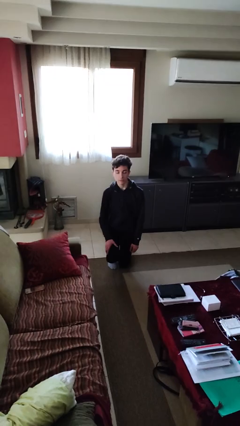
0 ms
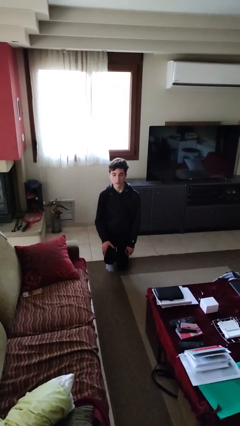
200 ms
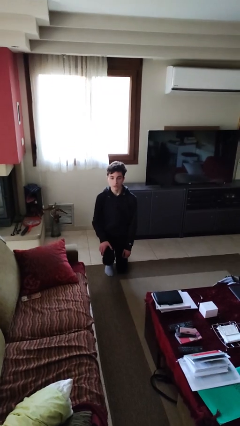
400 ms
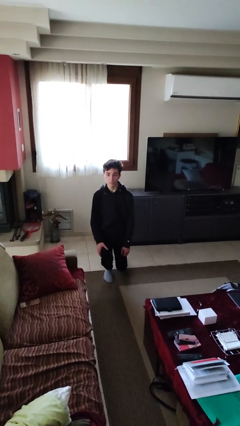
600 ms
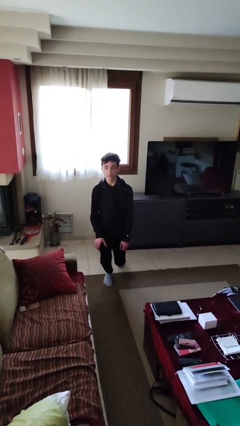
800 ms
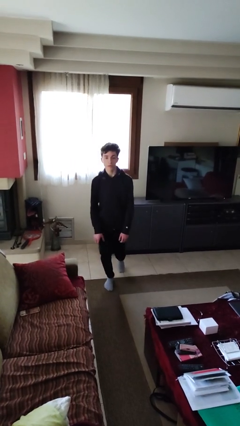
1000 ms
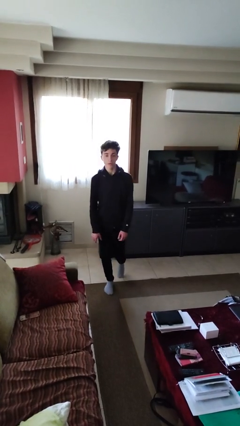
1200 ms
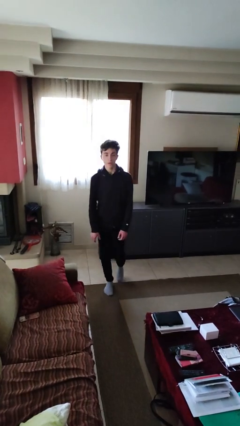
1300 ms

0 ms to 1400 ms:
person stands up from floor

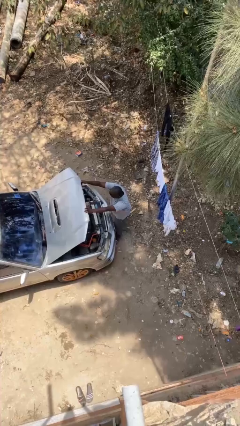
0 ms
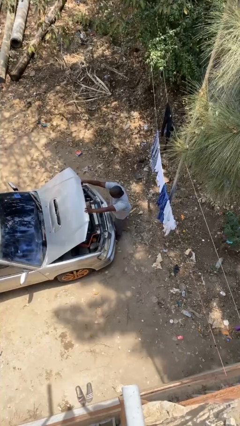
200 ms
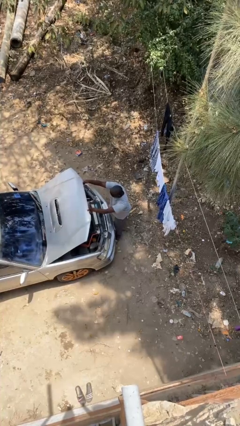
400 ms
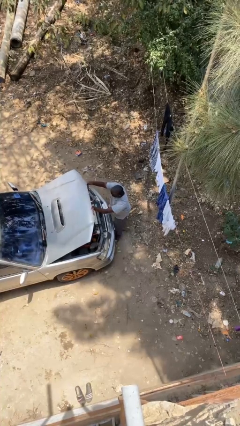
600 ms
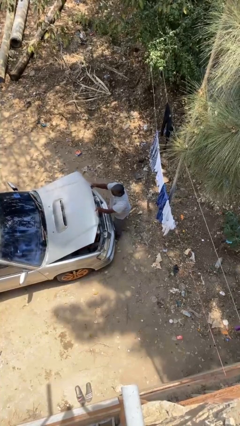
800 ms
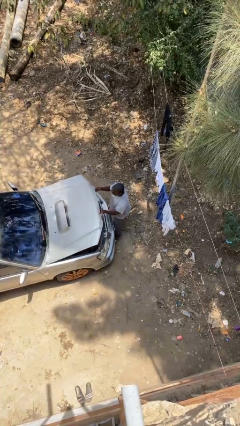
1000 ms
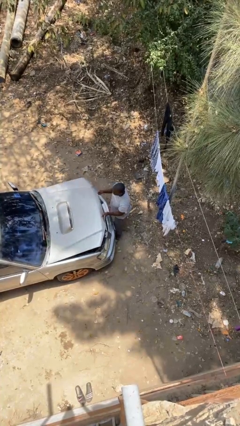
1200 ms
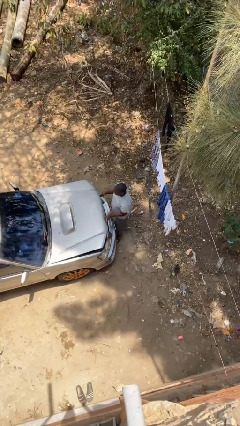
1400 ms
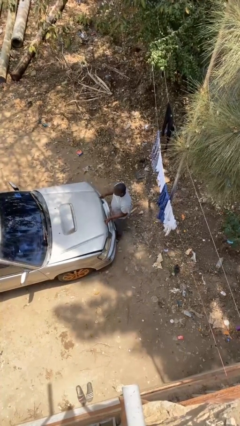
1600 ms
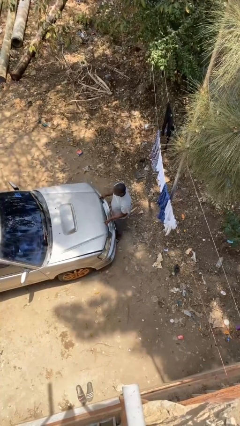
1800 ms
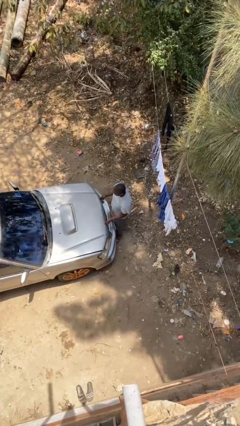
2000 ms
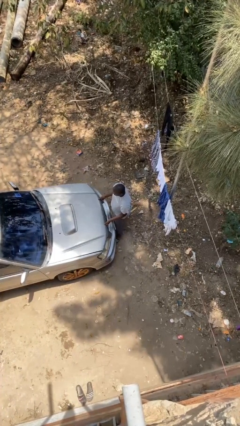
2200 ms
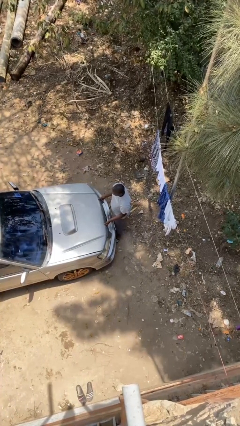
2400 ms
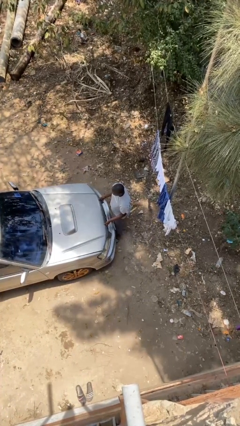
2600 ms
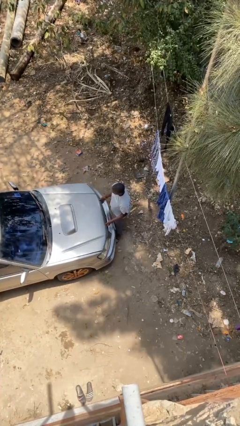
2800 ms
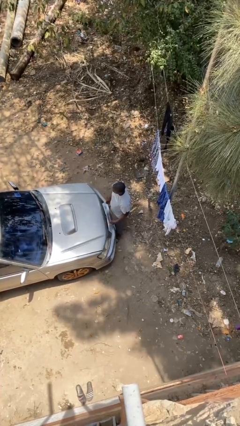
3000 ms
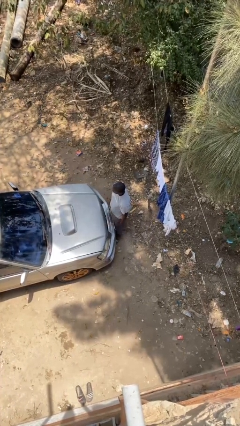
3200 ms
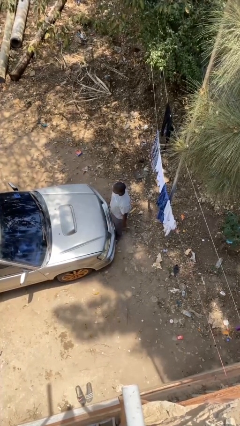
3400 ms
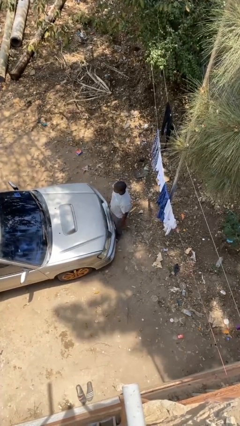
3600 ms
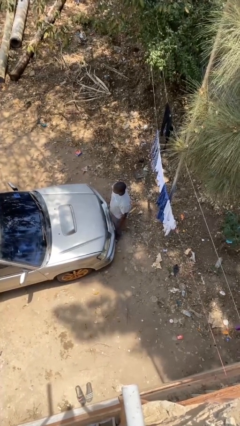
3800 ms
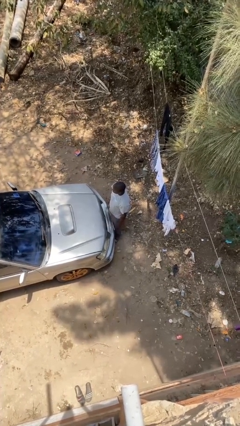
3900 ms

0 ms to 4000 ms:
person closes car hood

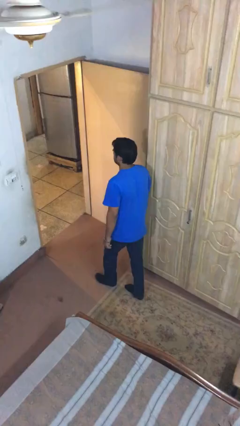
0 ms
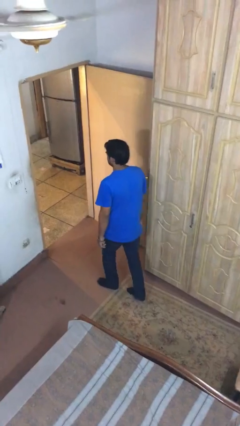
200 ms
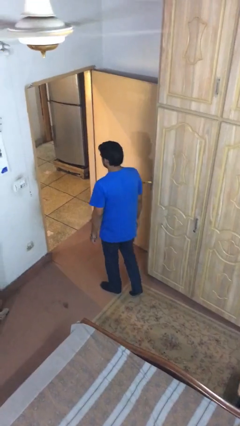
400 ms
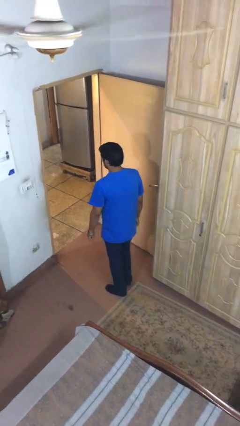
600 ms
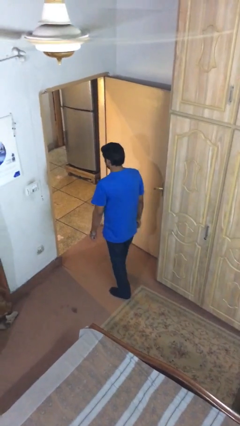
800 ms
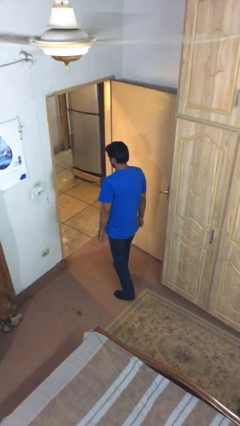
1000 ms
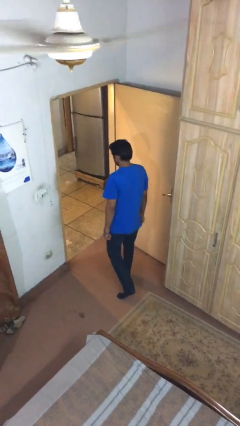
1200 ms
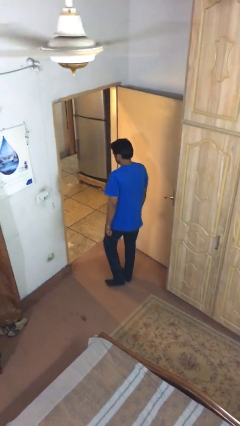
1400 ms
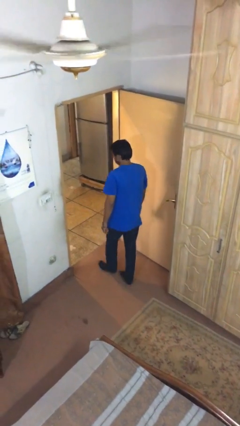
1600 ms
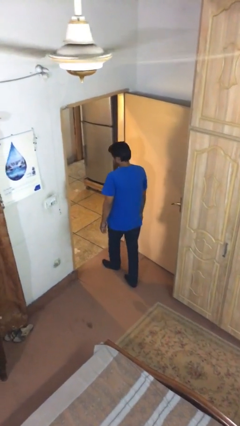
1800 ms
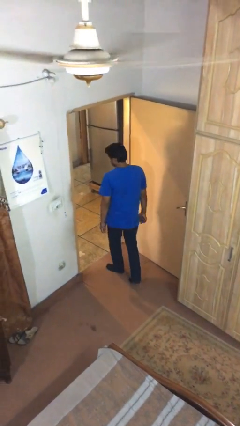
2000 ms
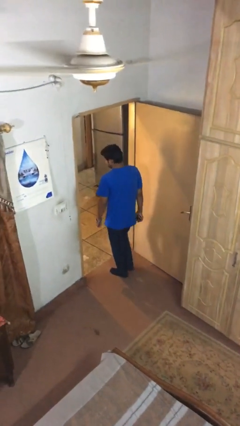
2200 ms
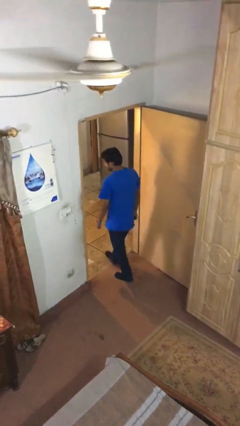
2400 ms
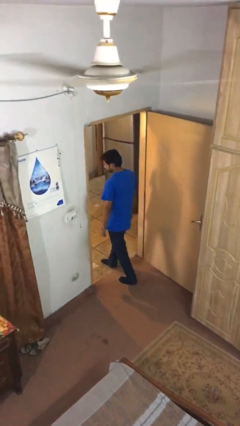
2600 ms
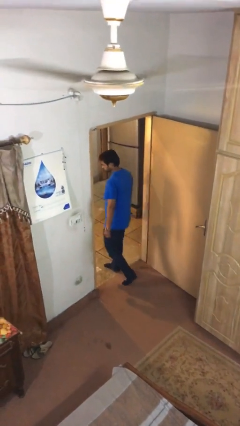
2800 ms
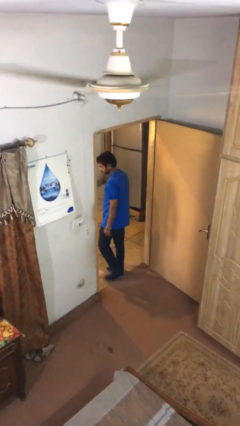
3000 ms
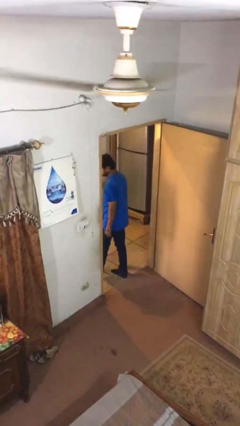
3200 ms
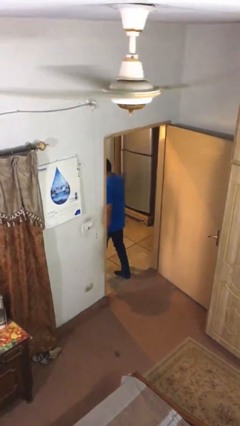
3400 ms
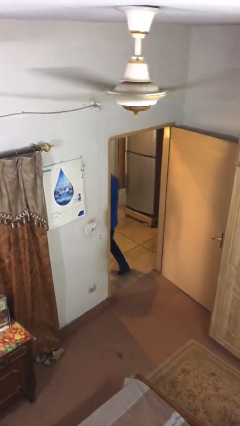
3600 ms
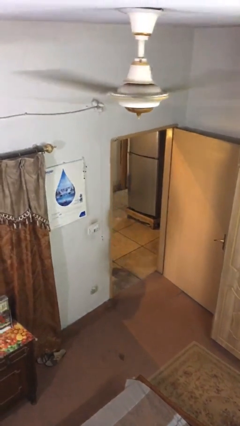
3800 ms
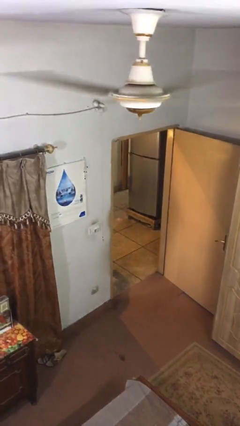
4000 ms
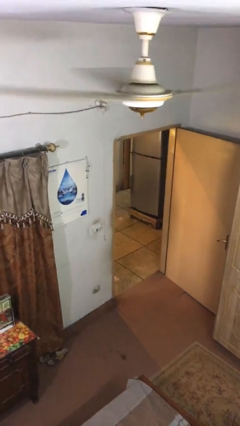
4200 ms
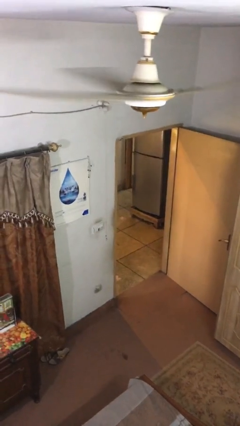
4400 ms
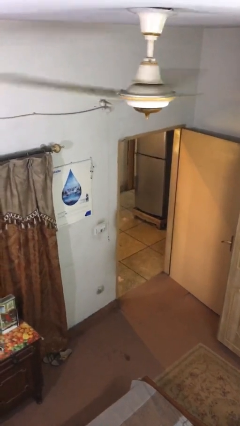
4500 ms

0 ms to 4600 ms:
person exits scene through structure

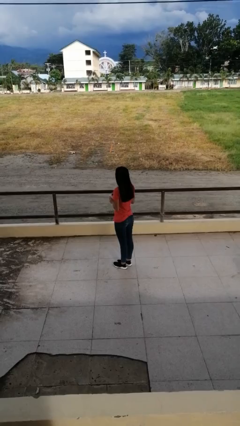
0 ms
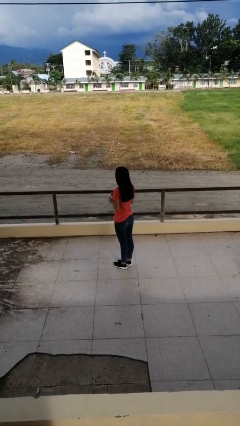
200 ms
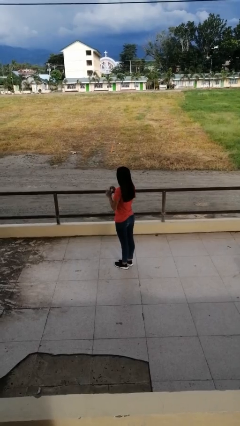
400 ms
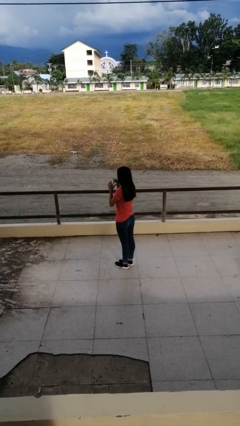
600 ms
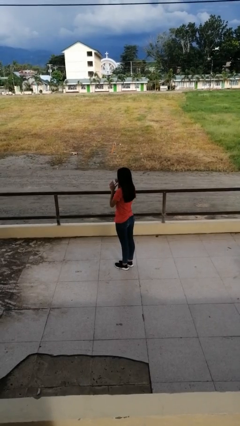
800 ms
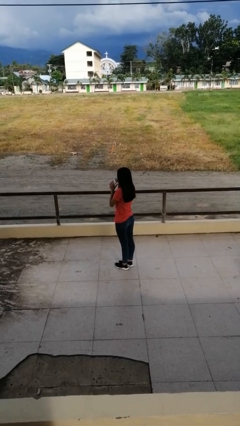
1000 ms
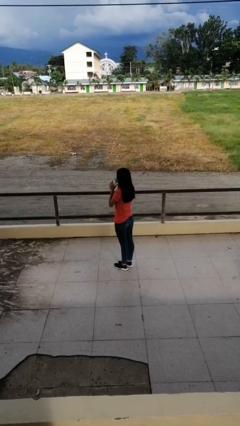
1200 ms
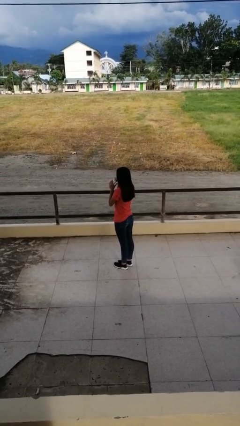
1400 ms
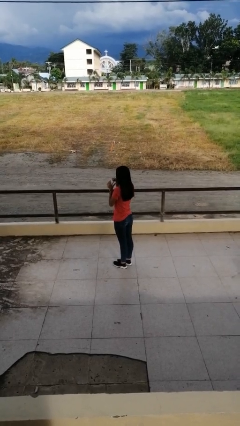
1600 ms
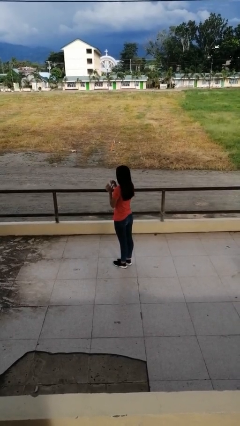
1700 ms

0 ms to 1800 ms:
person drinks from straw

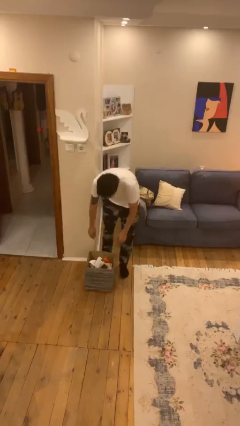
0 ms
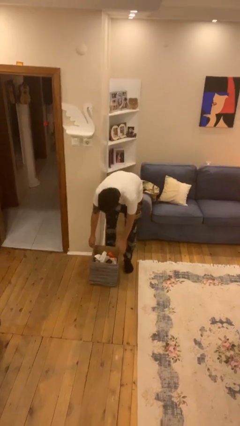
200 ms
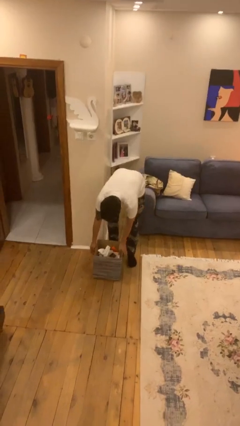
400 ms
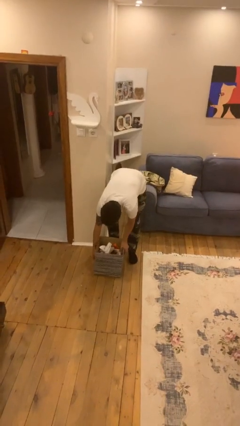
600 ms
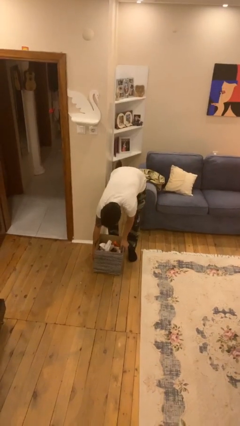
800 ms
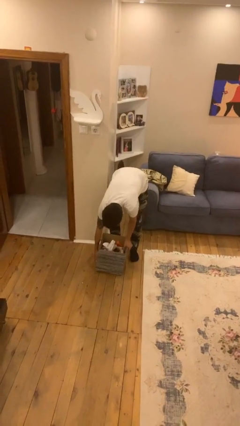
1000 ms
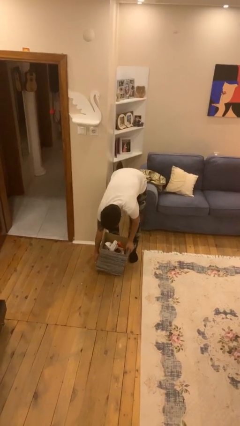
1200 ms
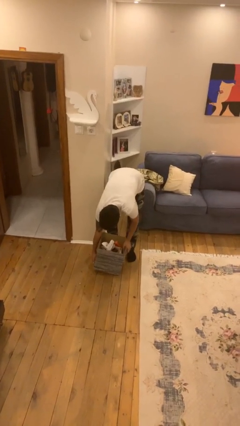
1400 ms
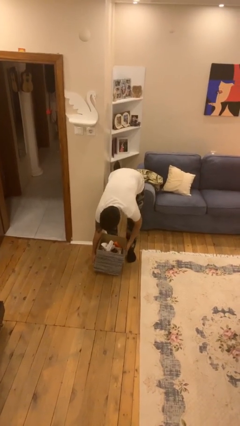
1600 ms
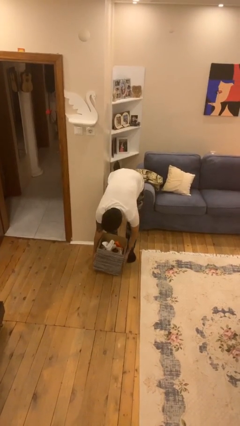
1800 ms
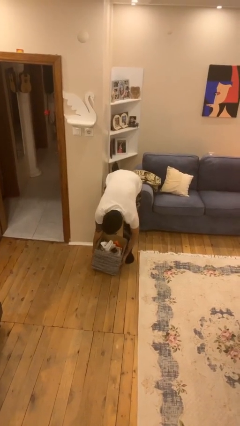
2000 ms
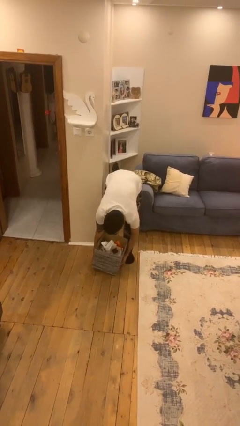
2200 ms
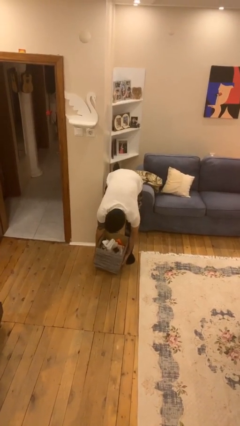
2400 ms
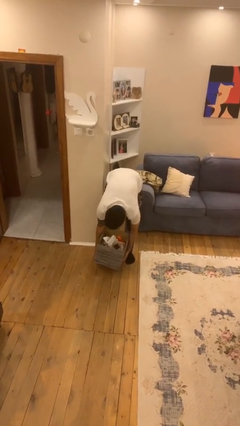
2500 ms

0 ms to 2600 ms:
person picks up object from floor

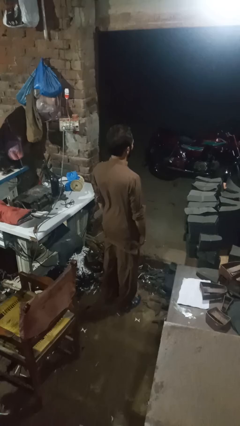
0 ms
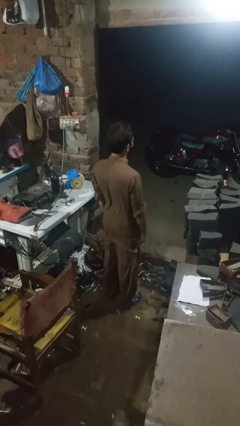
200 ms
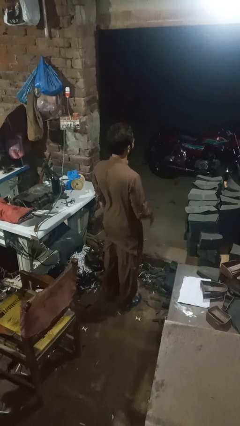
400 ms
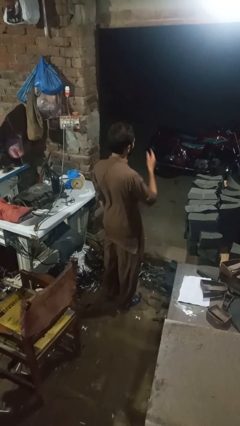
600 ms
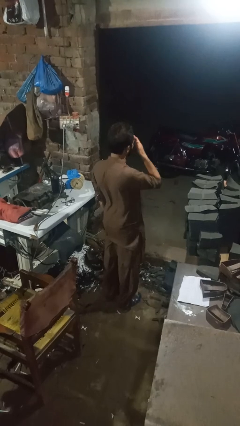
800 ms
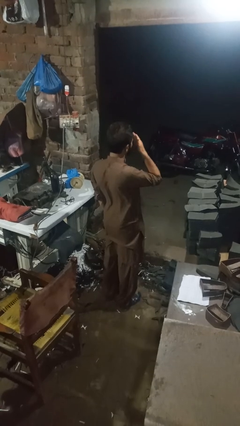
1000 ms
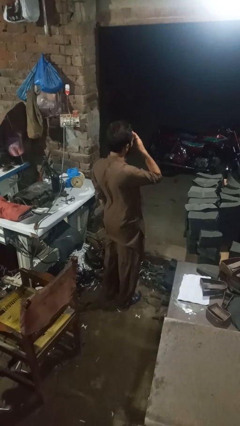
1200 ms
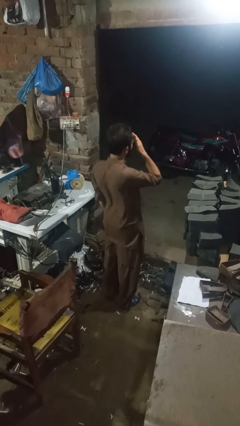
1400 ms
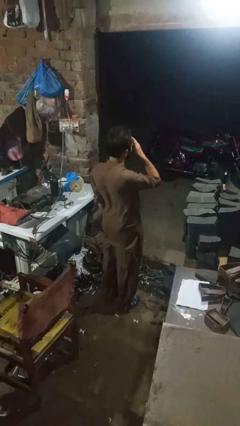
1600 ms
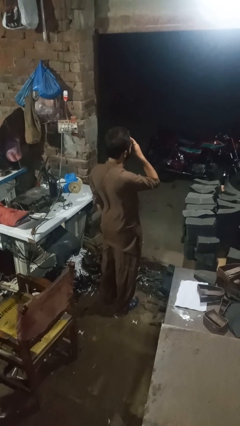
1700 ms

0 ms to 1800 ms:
person rubs eyes

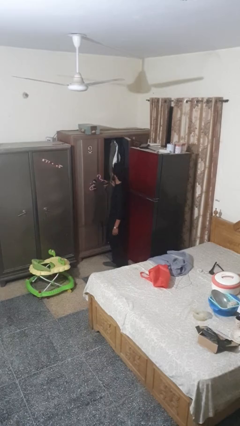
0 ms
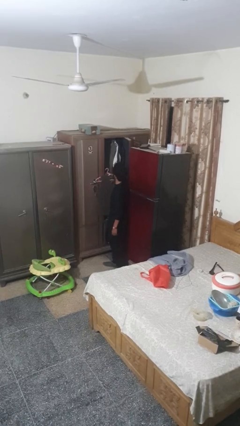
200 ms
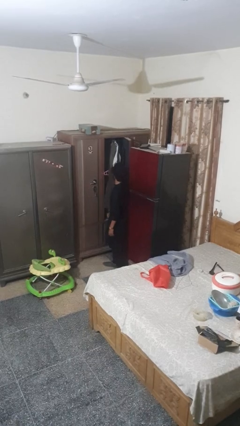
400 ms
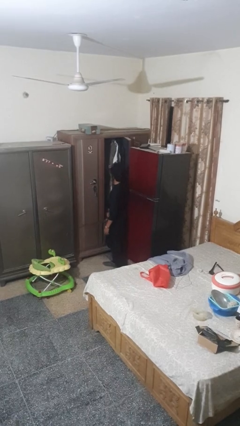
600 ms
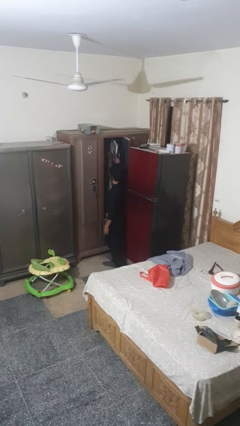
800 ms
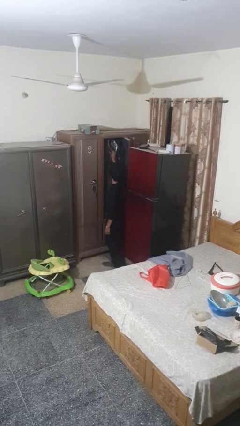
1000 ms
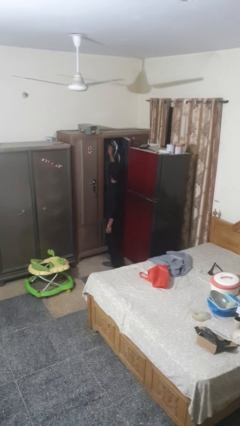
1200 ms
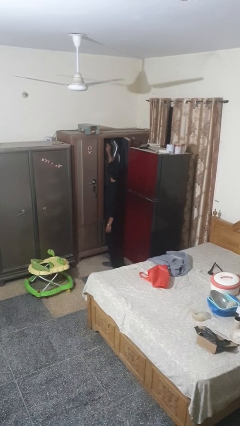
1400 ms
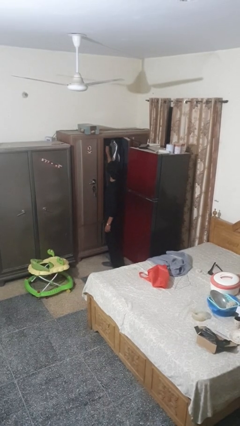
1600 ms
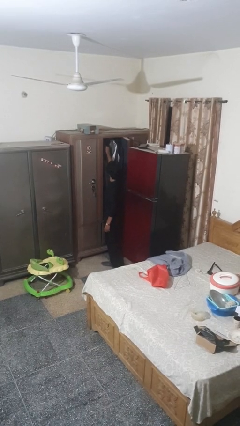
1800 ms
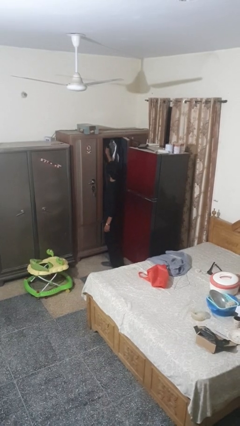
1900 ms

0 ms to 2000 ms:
person puts clothes into closet
